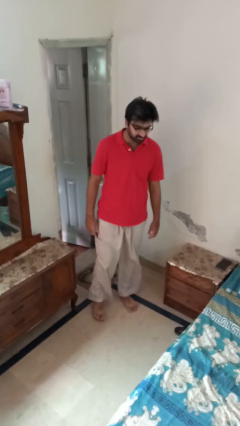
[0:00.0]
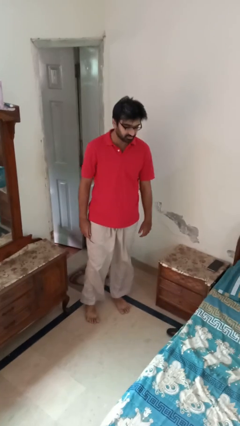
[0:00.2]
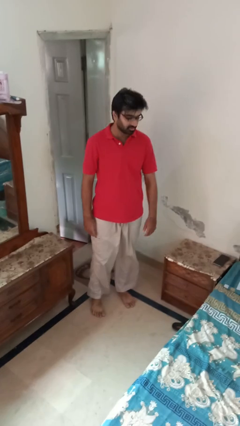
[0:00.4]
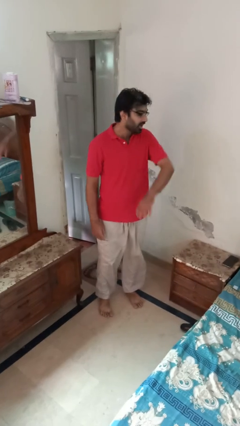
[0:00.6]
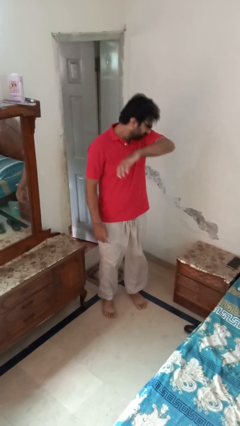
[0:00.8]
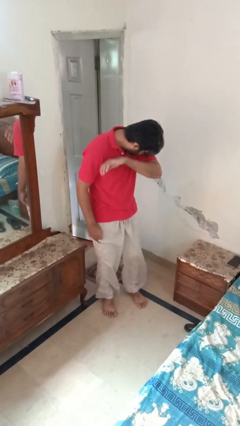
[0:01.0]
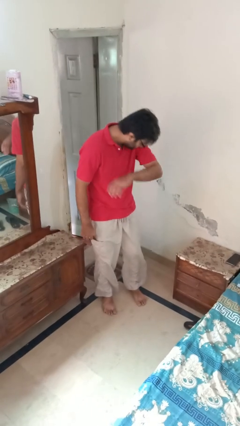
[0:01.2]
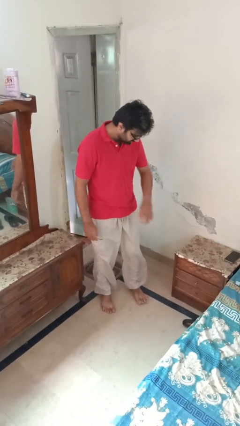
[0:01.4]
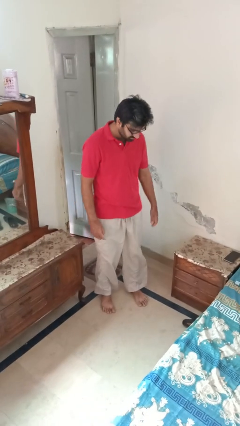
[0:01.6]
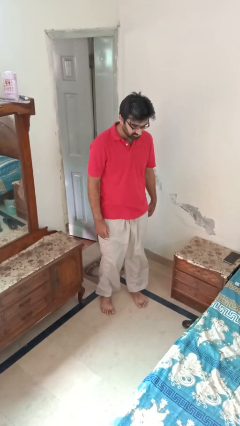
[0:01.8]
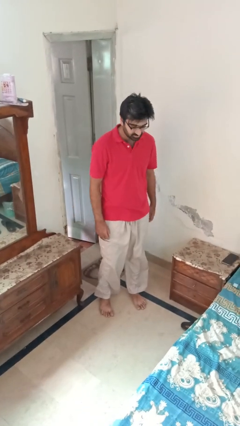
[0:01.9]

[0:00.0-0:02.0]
person sneezes into arm

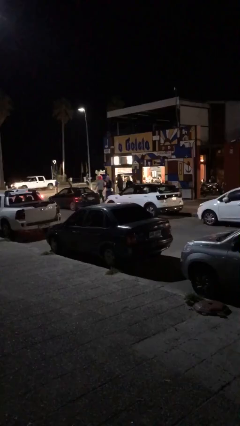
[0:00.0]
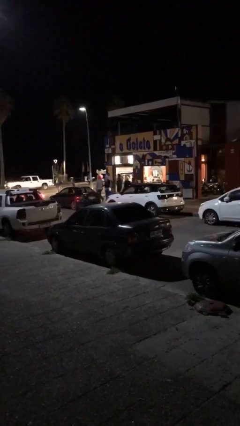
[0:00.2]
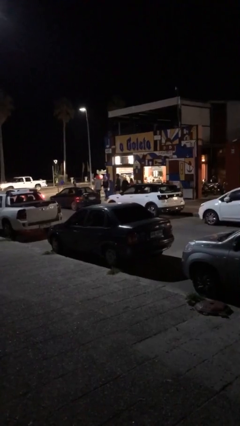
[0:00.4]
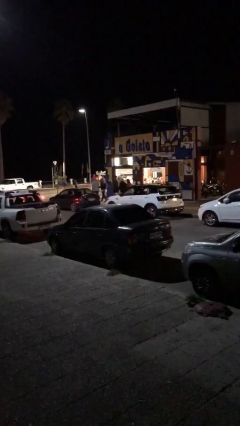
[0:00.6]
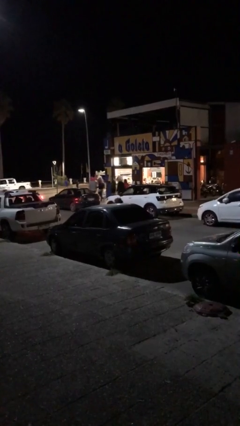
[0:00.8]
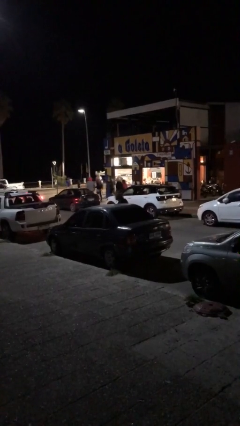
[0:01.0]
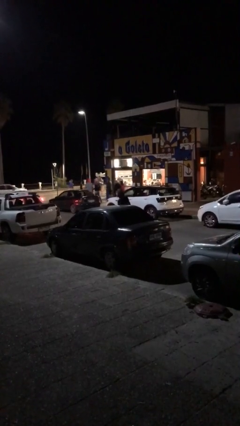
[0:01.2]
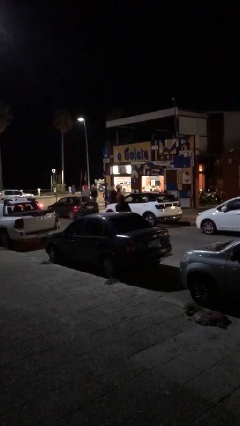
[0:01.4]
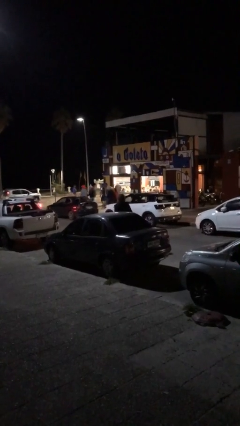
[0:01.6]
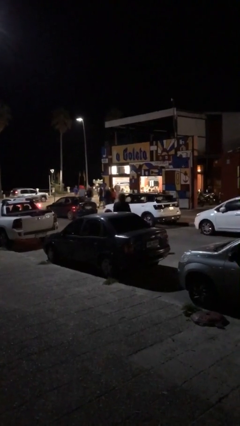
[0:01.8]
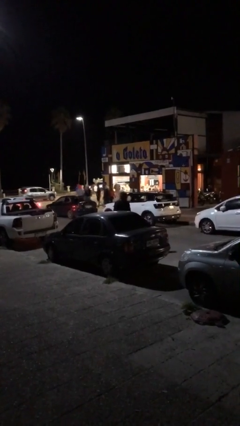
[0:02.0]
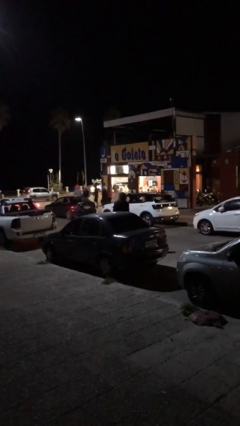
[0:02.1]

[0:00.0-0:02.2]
person exits car

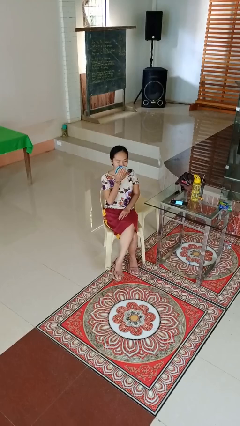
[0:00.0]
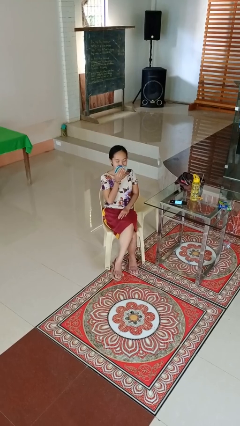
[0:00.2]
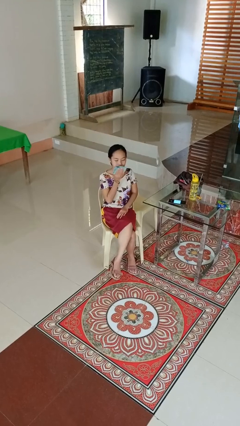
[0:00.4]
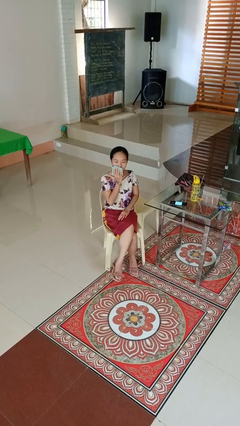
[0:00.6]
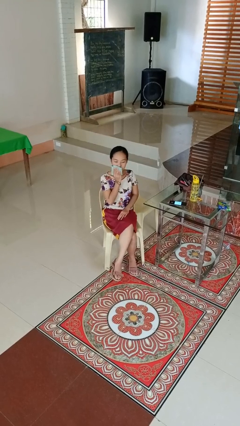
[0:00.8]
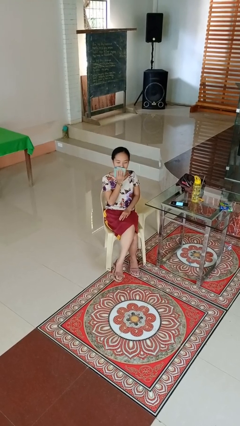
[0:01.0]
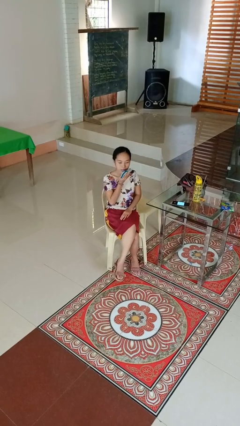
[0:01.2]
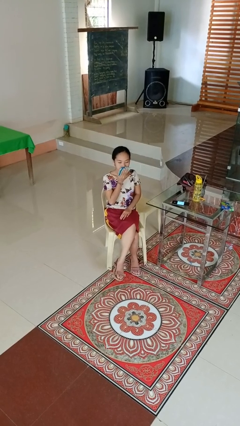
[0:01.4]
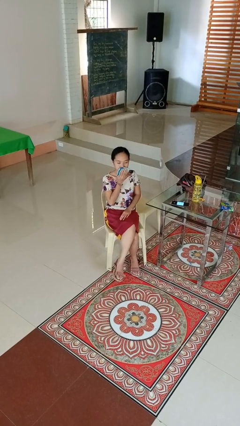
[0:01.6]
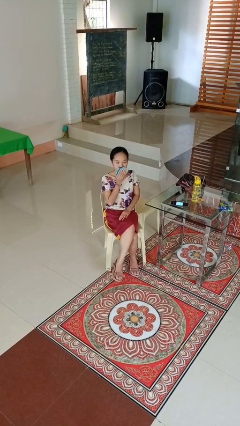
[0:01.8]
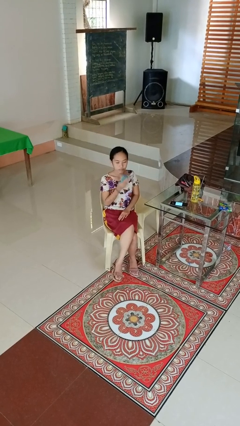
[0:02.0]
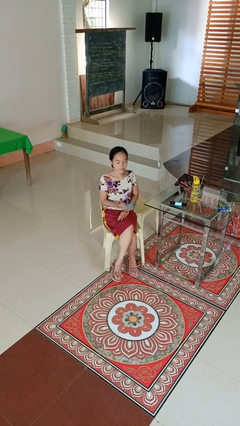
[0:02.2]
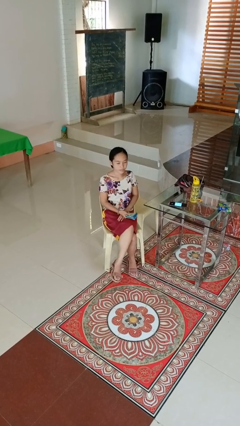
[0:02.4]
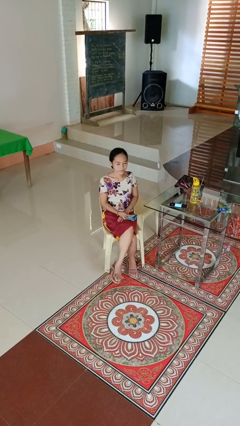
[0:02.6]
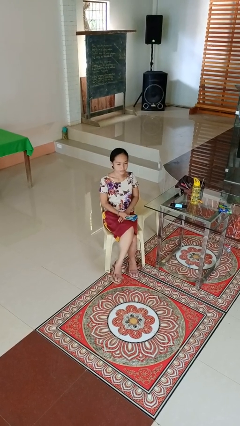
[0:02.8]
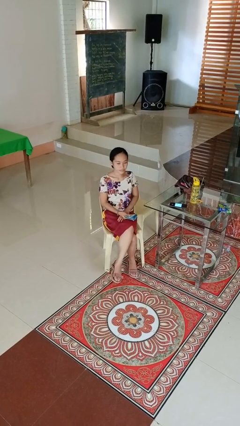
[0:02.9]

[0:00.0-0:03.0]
person wipes mouth with napkin

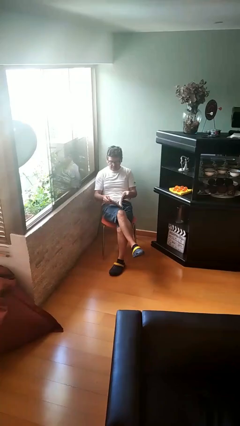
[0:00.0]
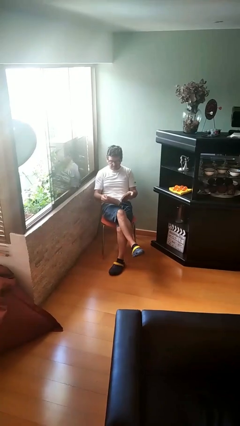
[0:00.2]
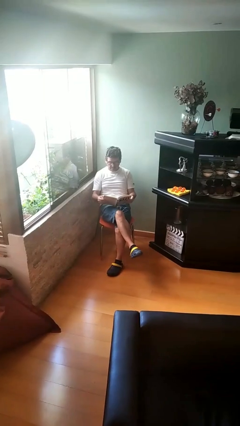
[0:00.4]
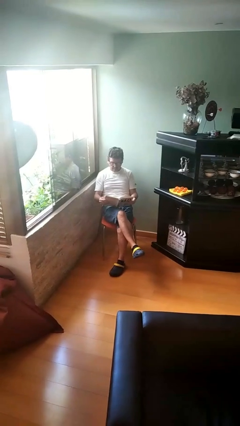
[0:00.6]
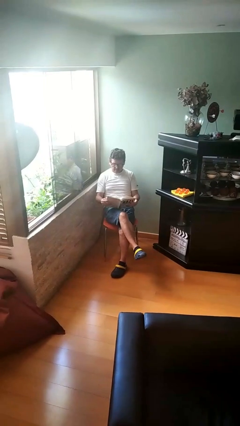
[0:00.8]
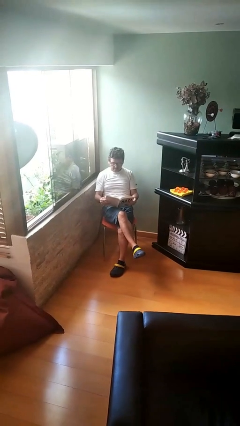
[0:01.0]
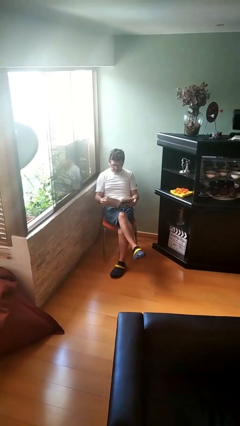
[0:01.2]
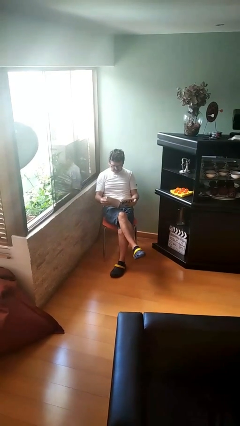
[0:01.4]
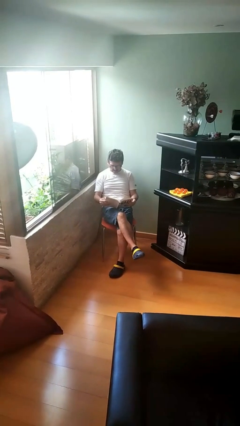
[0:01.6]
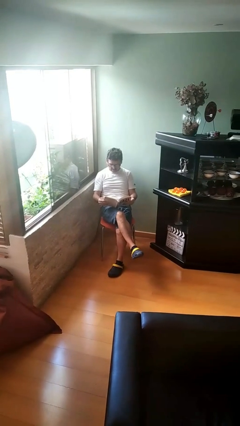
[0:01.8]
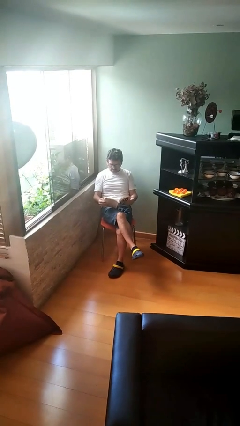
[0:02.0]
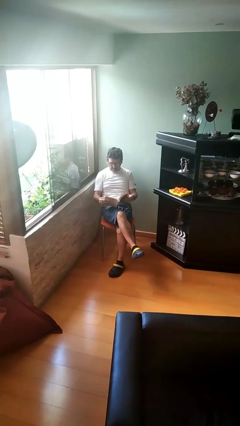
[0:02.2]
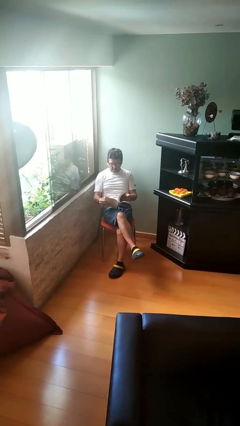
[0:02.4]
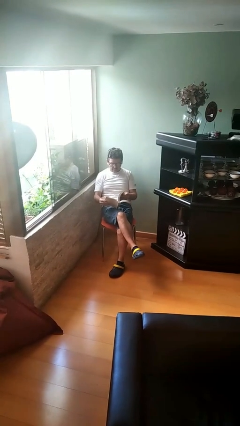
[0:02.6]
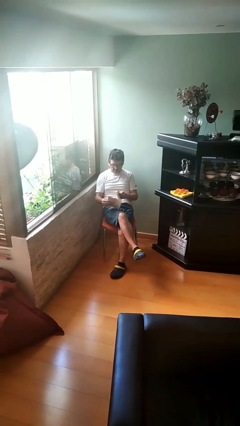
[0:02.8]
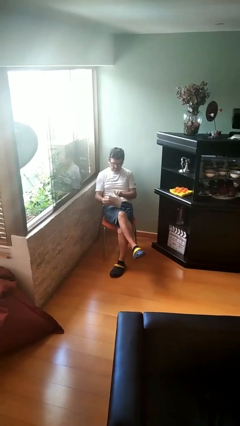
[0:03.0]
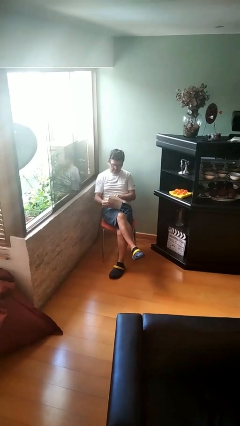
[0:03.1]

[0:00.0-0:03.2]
person reads document

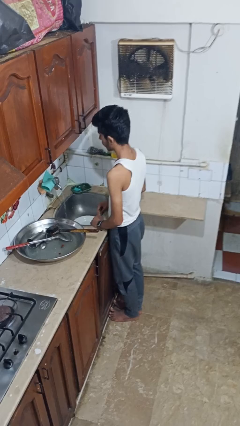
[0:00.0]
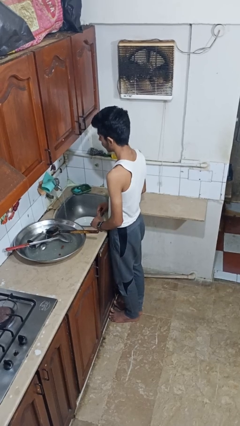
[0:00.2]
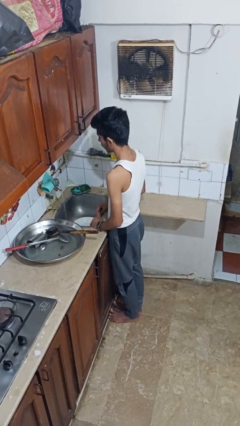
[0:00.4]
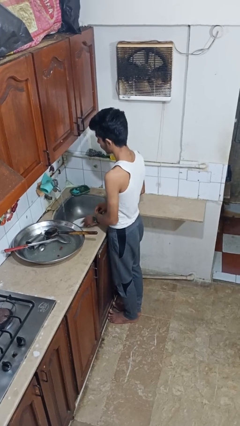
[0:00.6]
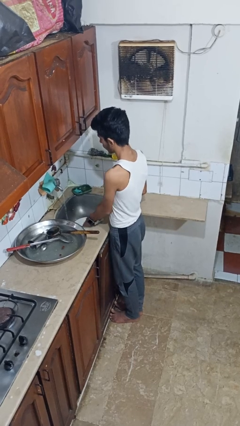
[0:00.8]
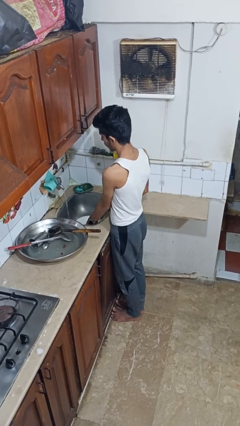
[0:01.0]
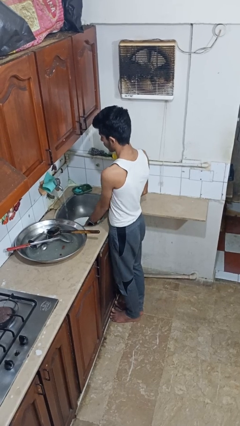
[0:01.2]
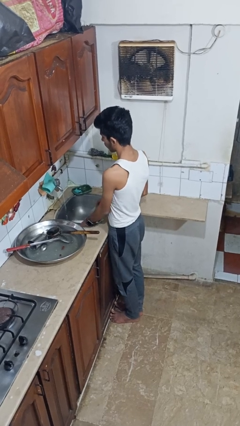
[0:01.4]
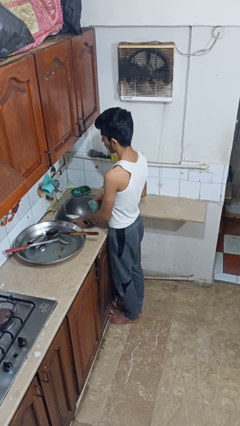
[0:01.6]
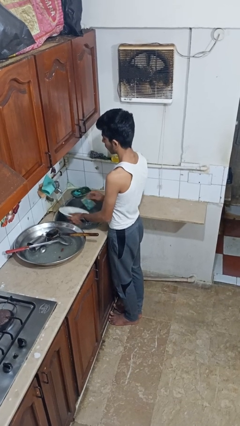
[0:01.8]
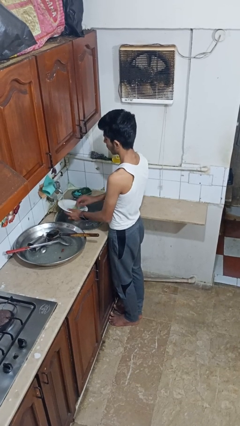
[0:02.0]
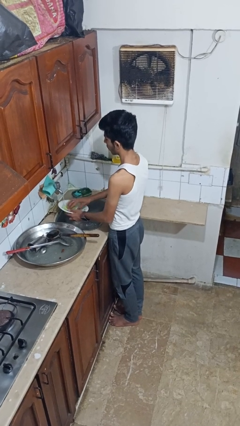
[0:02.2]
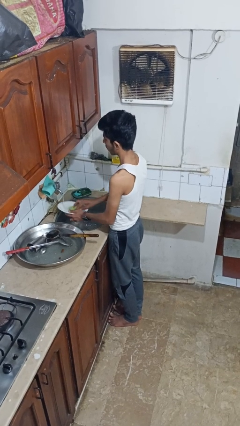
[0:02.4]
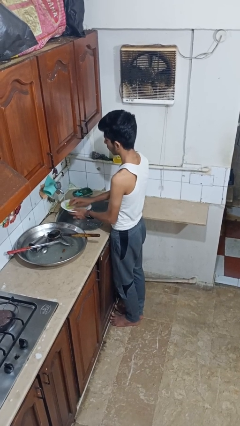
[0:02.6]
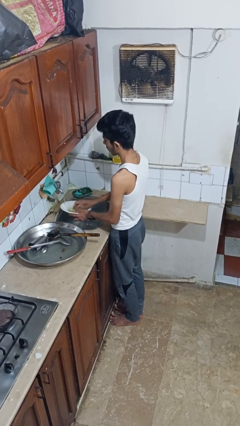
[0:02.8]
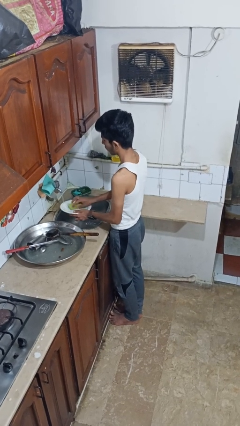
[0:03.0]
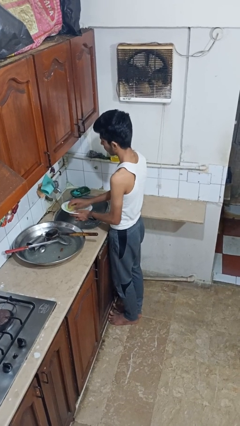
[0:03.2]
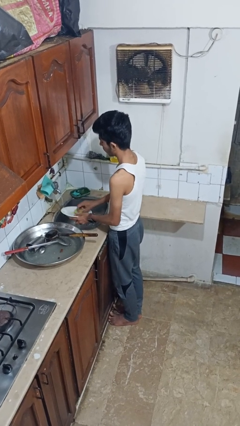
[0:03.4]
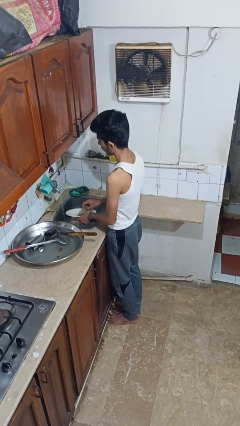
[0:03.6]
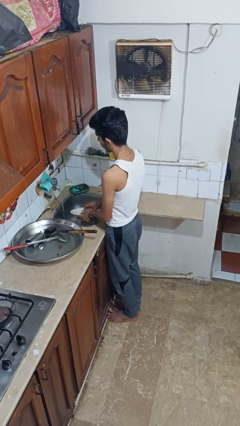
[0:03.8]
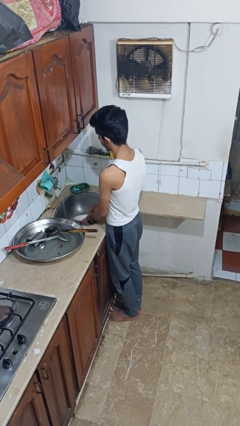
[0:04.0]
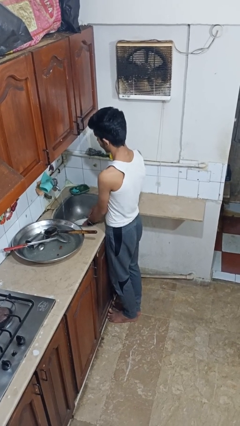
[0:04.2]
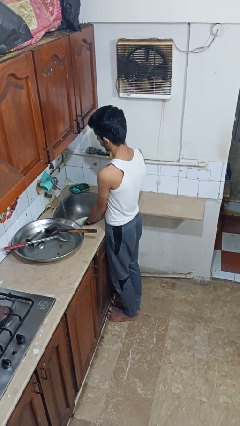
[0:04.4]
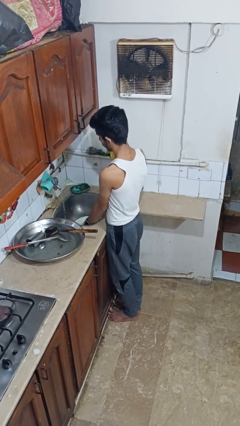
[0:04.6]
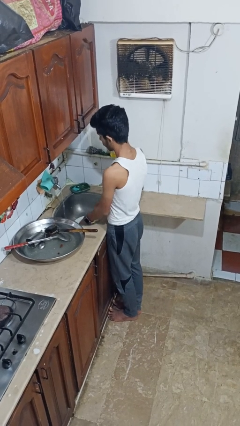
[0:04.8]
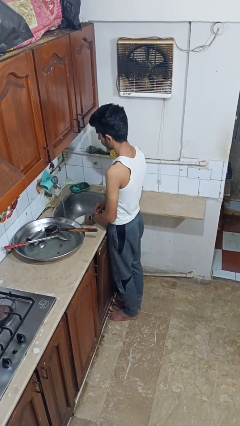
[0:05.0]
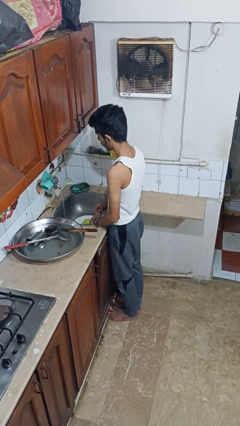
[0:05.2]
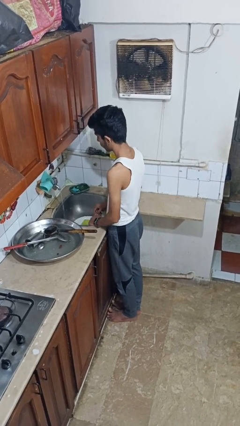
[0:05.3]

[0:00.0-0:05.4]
person washes dish

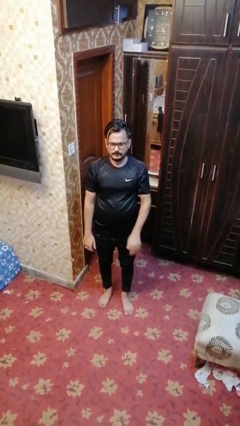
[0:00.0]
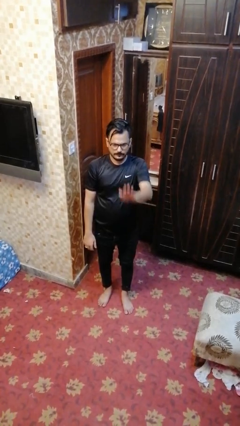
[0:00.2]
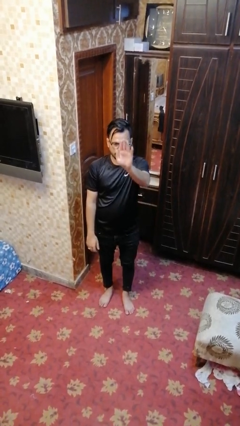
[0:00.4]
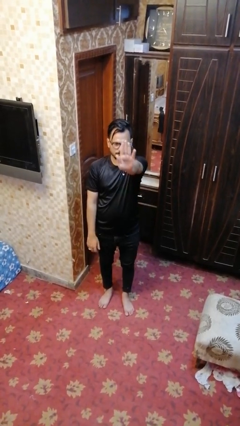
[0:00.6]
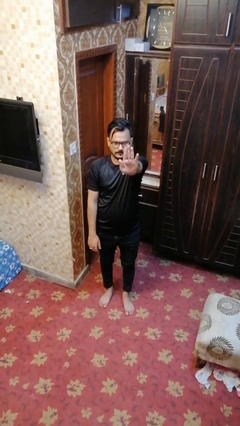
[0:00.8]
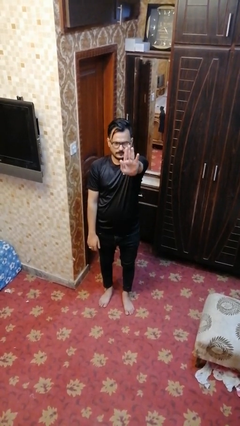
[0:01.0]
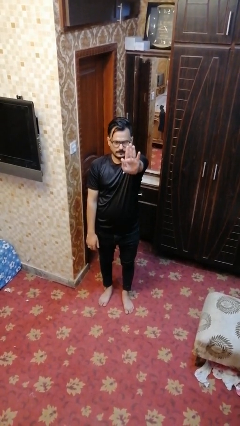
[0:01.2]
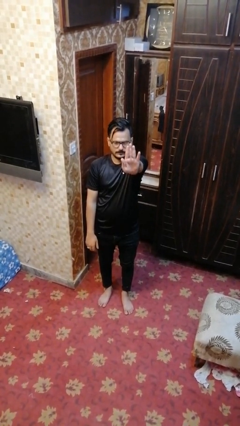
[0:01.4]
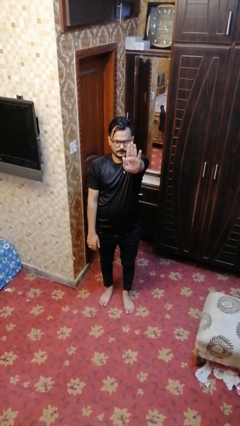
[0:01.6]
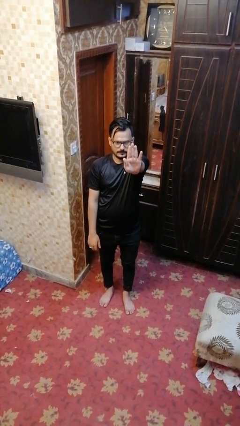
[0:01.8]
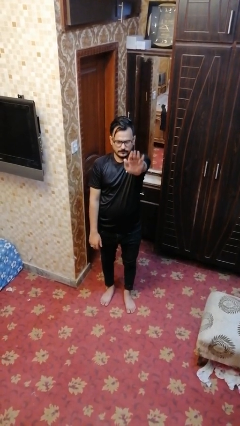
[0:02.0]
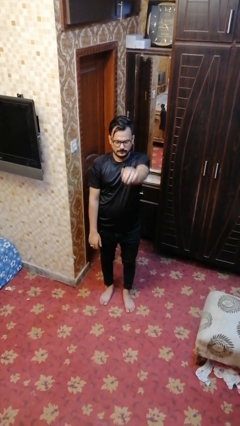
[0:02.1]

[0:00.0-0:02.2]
person gestures stop
